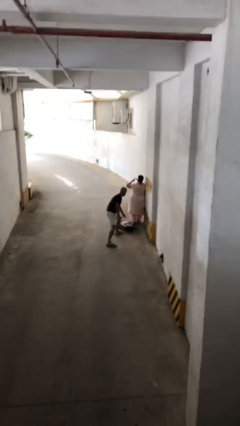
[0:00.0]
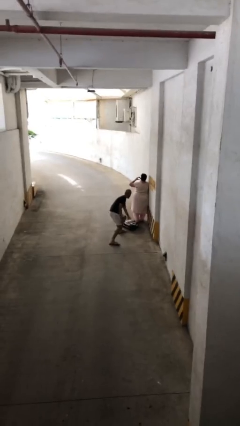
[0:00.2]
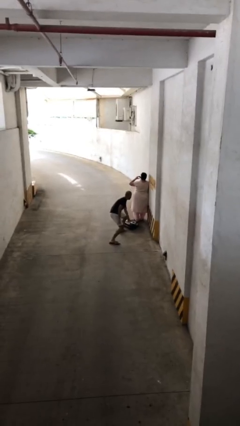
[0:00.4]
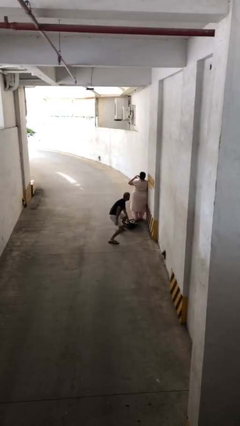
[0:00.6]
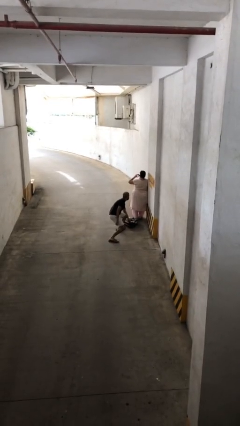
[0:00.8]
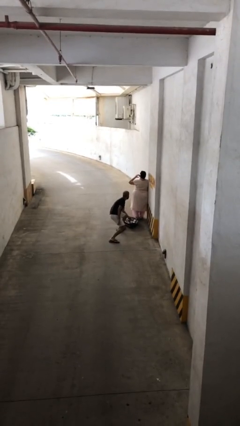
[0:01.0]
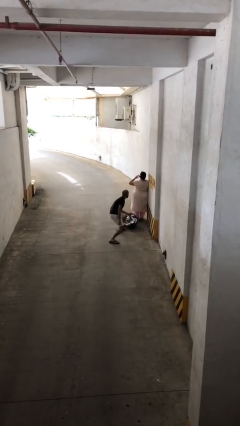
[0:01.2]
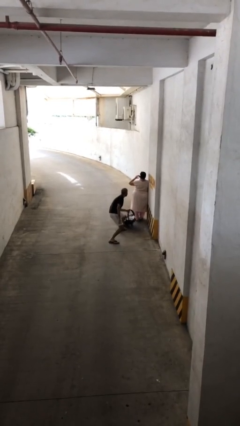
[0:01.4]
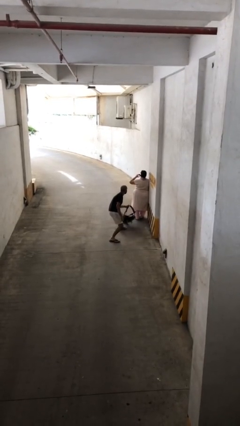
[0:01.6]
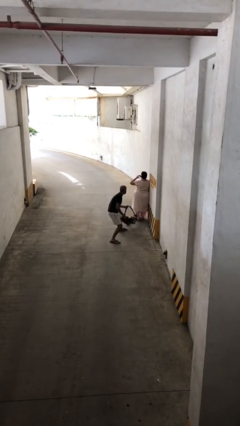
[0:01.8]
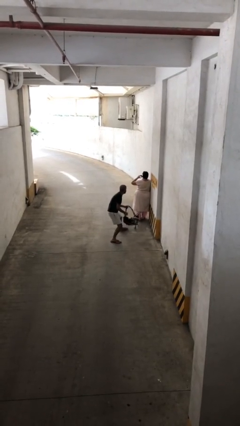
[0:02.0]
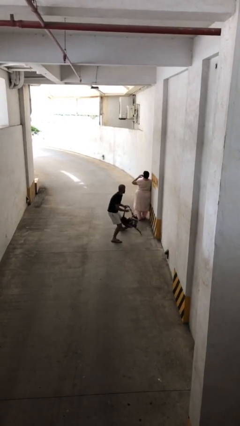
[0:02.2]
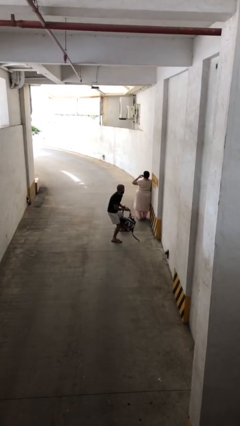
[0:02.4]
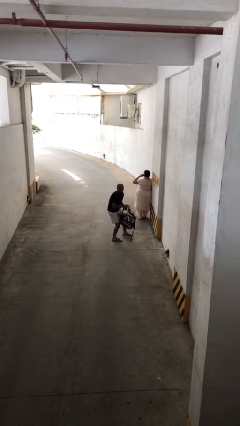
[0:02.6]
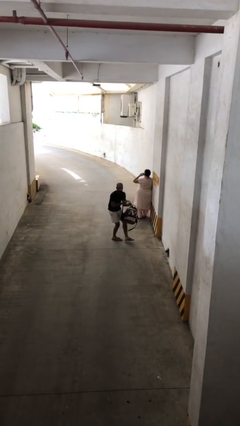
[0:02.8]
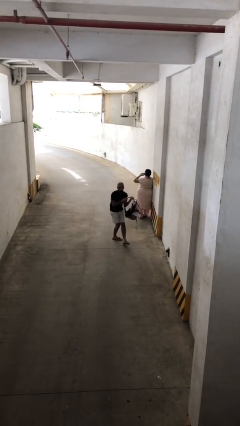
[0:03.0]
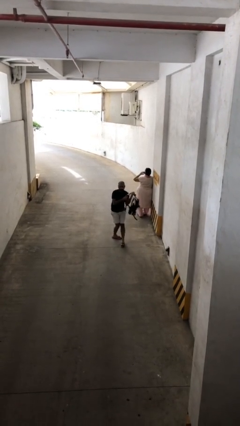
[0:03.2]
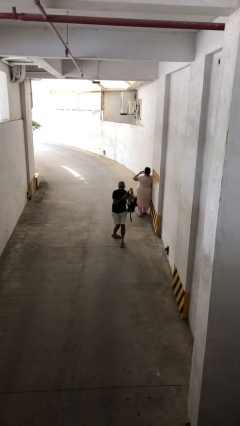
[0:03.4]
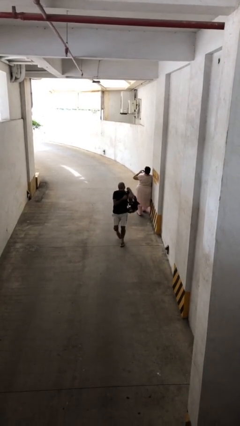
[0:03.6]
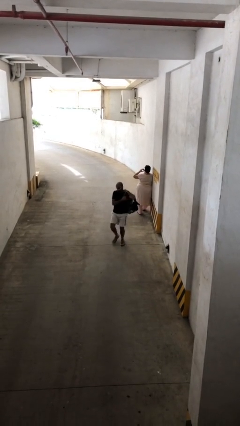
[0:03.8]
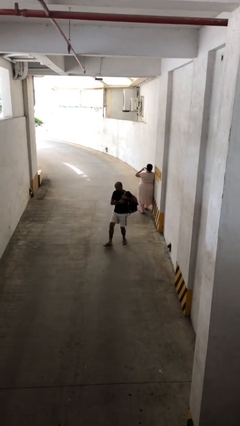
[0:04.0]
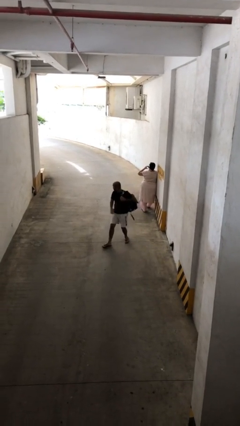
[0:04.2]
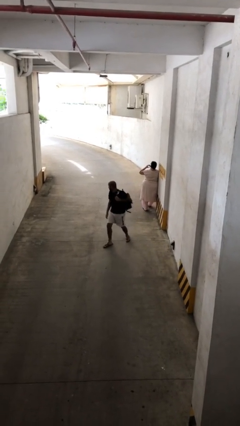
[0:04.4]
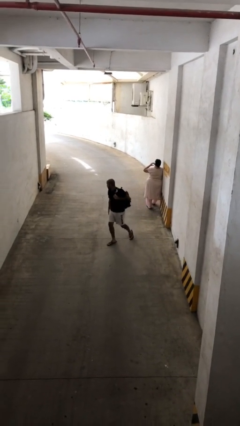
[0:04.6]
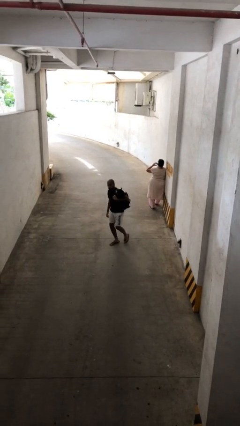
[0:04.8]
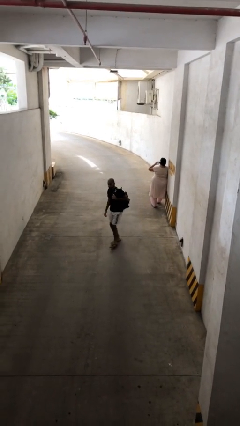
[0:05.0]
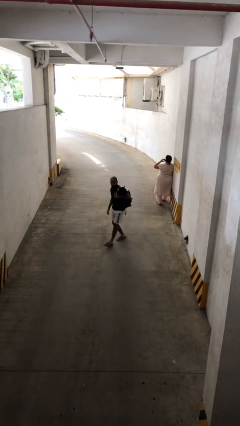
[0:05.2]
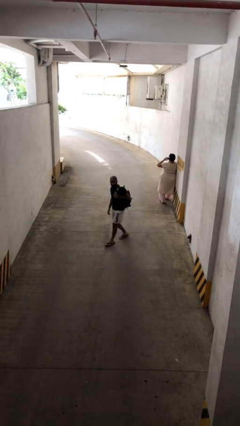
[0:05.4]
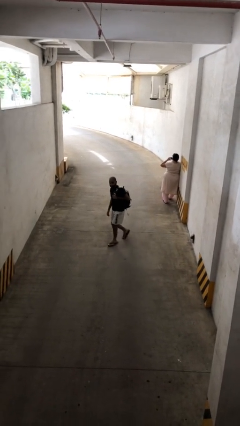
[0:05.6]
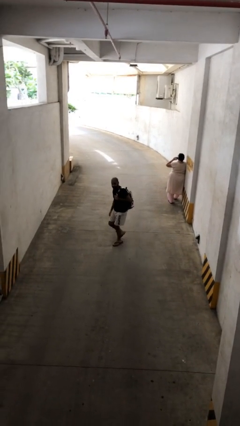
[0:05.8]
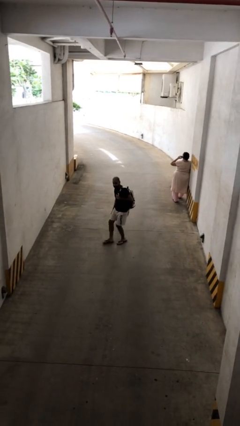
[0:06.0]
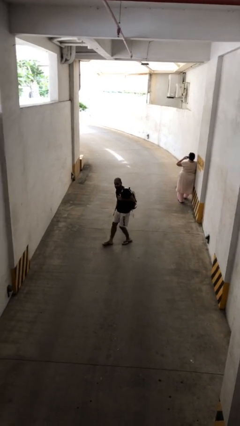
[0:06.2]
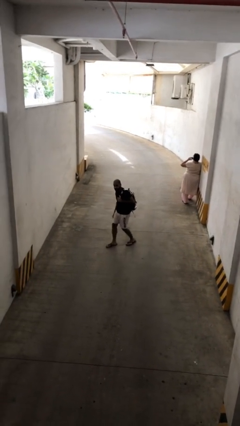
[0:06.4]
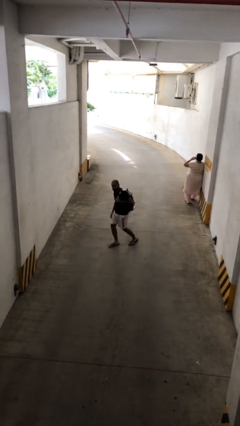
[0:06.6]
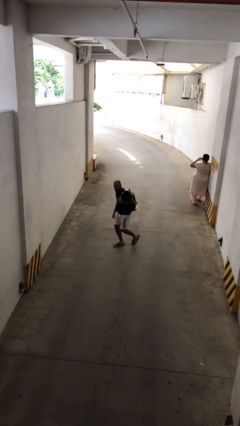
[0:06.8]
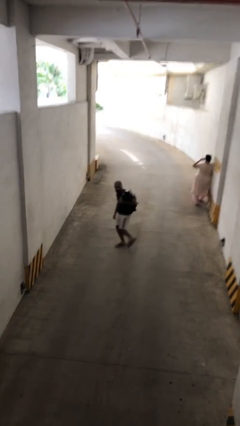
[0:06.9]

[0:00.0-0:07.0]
person steals object from person

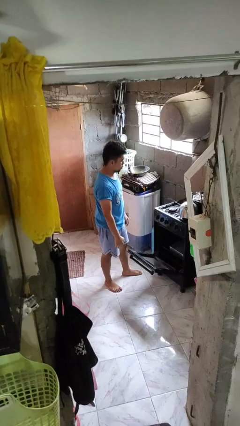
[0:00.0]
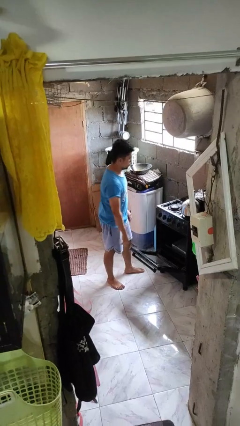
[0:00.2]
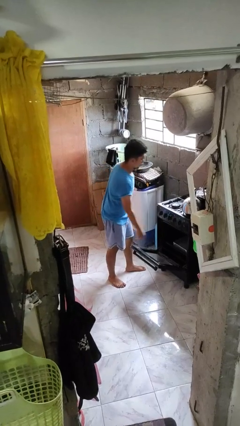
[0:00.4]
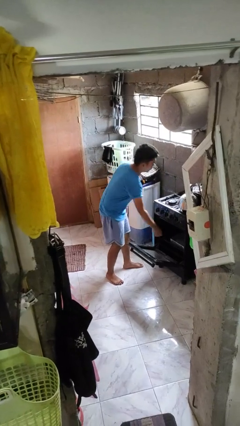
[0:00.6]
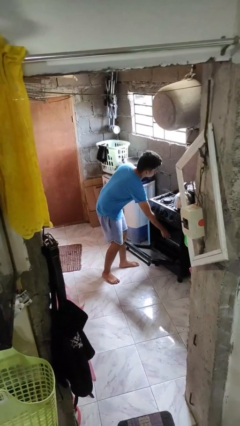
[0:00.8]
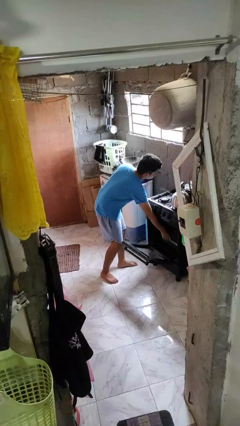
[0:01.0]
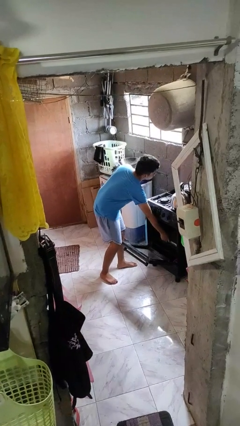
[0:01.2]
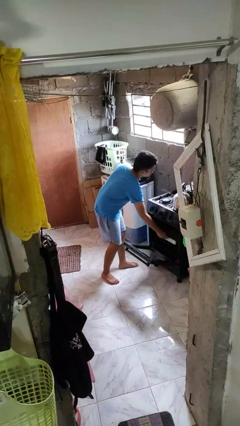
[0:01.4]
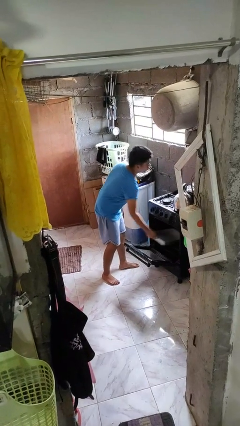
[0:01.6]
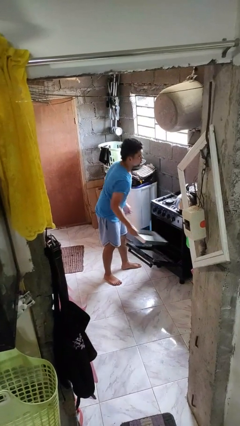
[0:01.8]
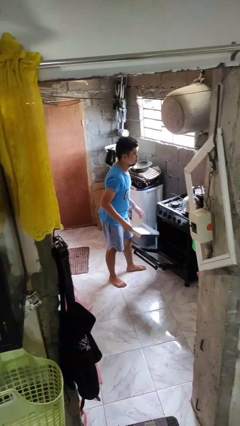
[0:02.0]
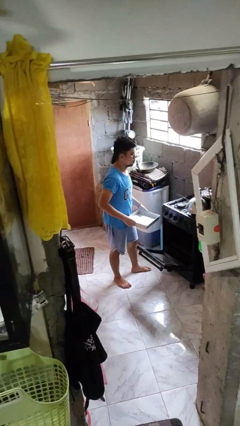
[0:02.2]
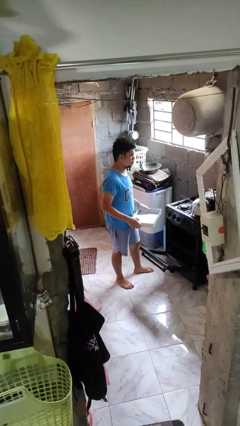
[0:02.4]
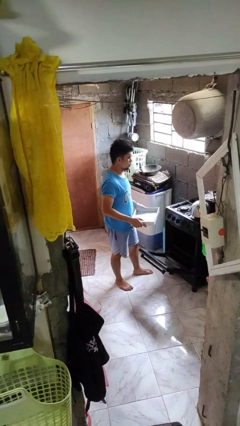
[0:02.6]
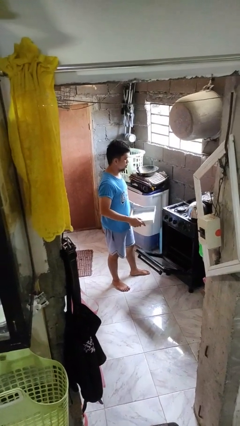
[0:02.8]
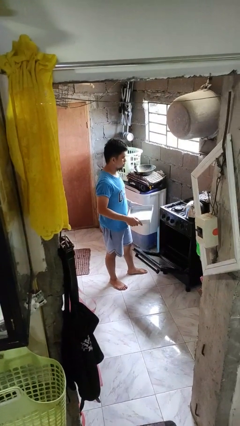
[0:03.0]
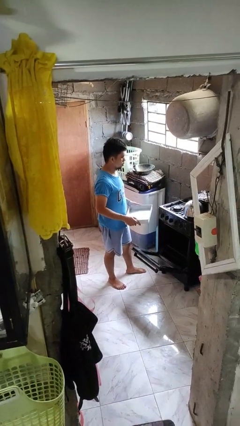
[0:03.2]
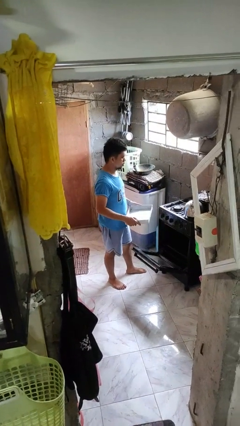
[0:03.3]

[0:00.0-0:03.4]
person takes object from oven

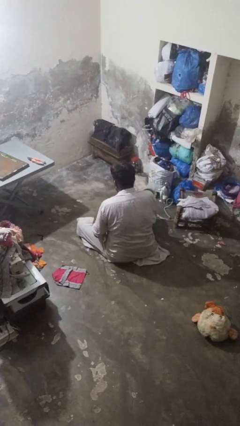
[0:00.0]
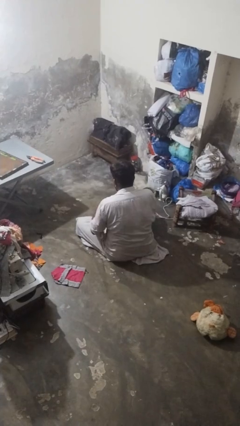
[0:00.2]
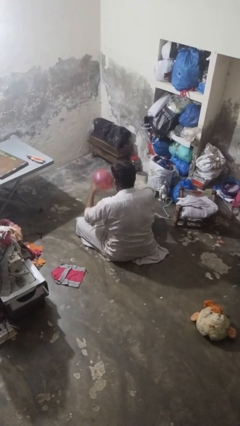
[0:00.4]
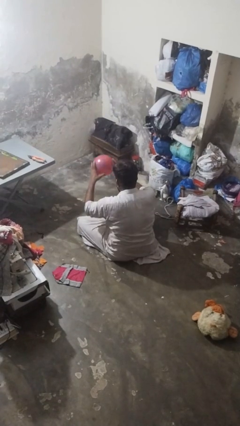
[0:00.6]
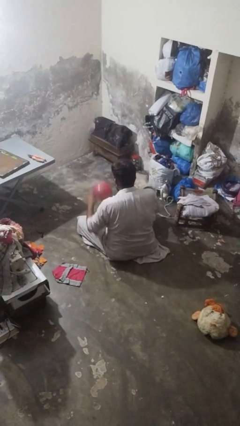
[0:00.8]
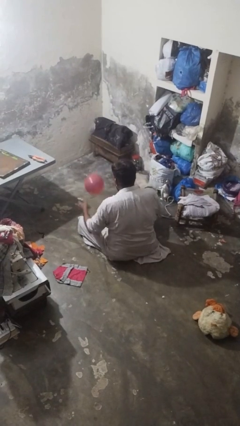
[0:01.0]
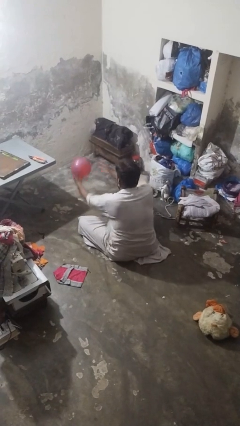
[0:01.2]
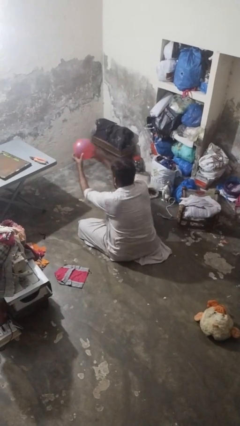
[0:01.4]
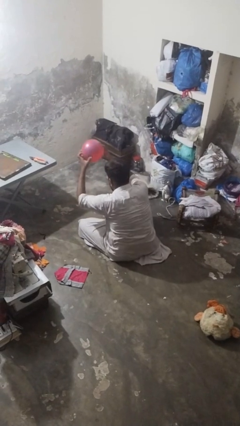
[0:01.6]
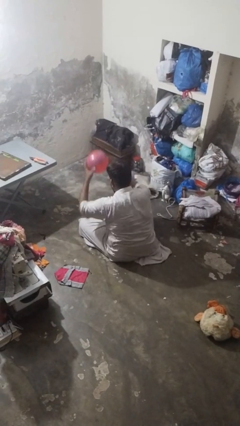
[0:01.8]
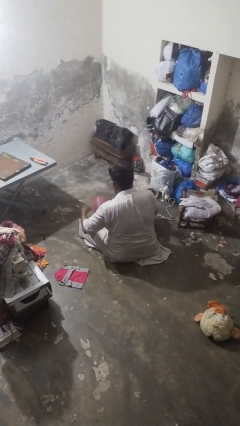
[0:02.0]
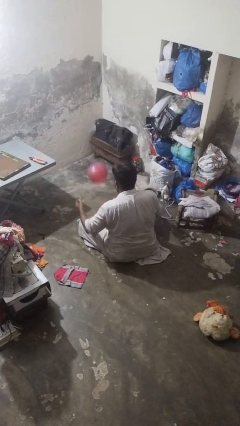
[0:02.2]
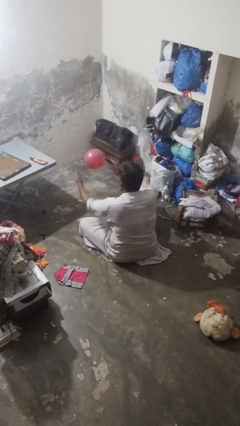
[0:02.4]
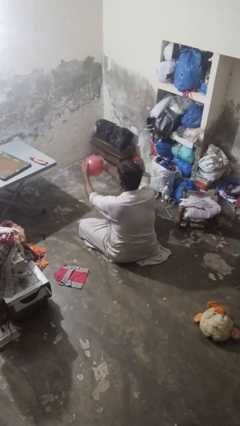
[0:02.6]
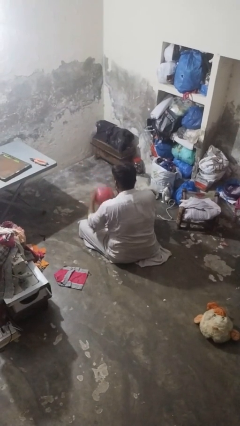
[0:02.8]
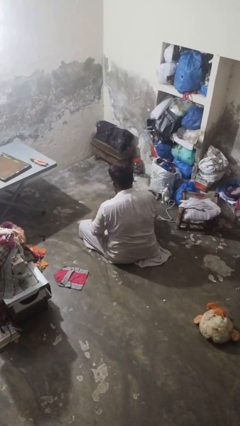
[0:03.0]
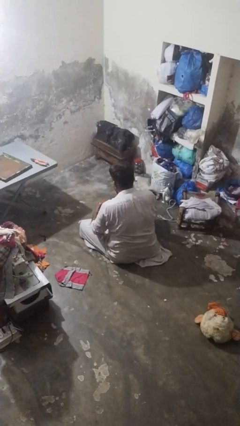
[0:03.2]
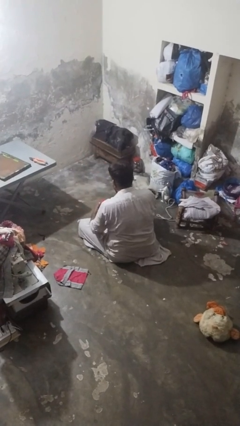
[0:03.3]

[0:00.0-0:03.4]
person bounces ball on floor

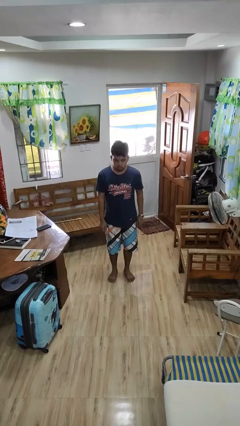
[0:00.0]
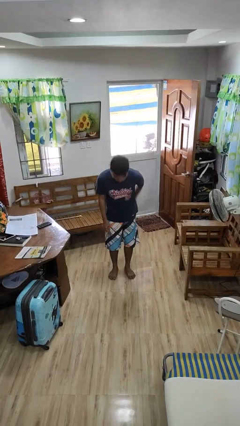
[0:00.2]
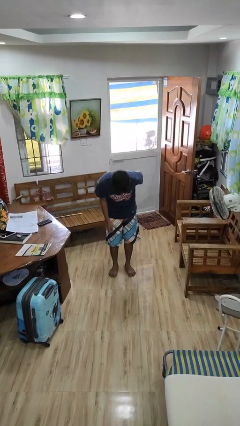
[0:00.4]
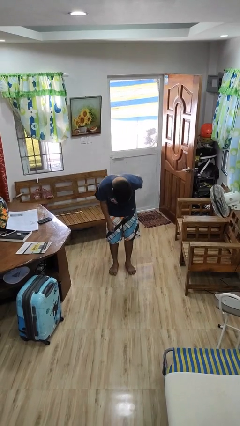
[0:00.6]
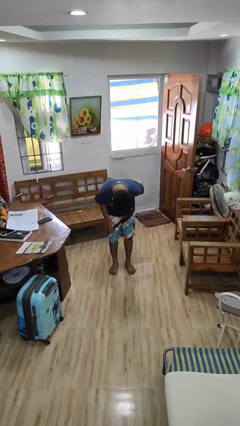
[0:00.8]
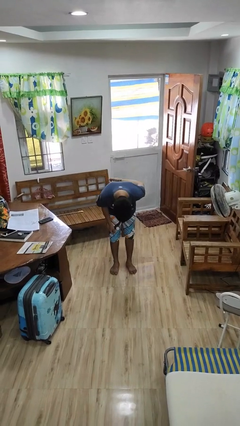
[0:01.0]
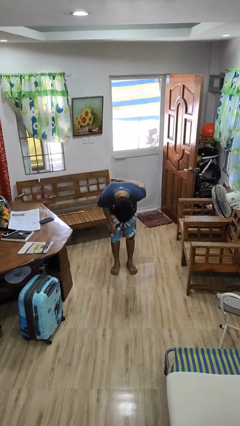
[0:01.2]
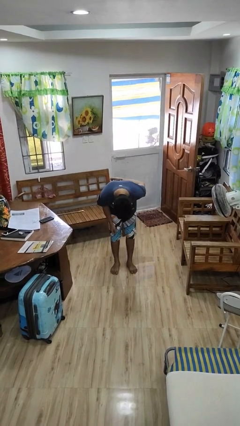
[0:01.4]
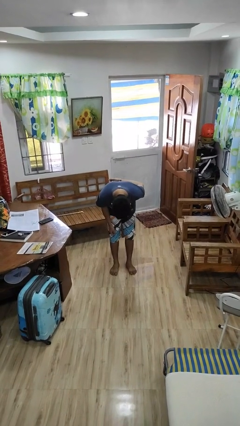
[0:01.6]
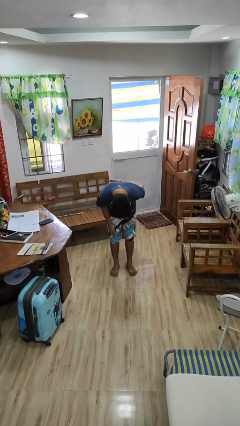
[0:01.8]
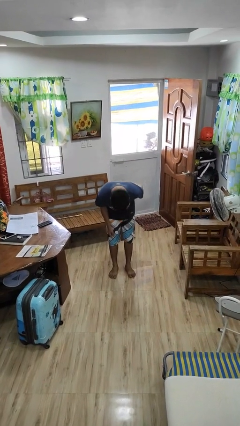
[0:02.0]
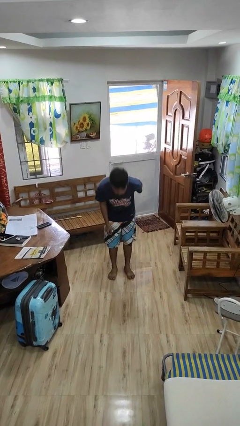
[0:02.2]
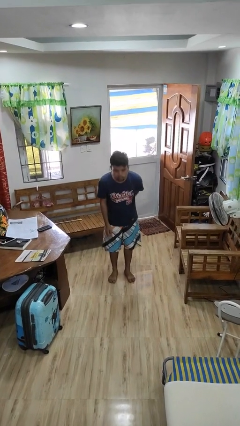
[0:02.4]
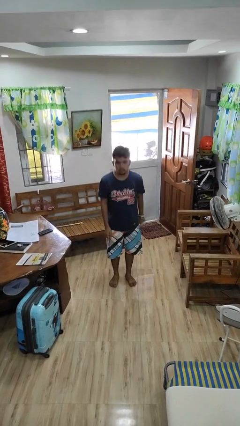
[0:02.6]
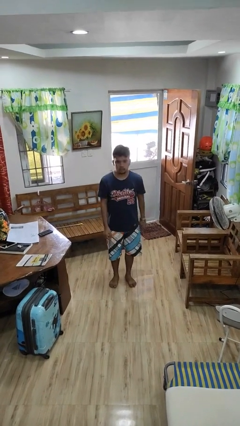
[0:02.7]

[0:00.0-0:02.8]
person bows

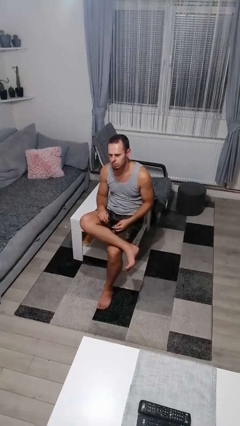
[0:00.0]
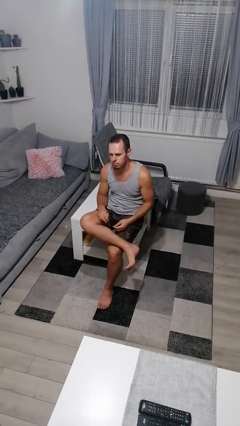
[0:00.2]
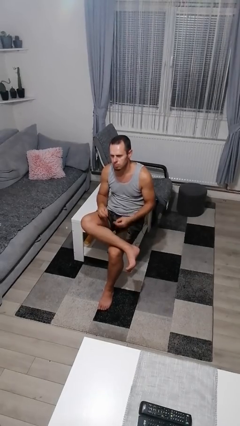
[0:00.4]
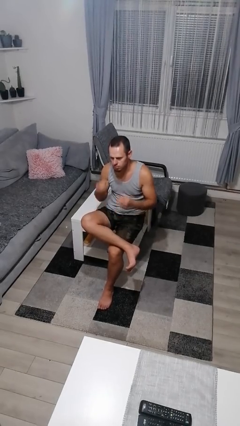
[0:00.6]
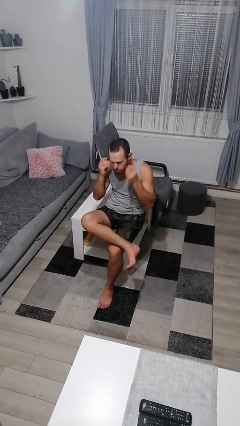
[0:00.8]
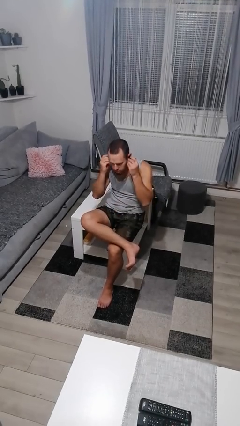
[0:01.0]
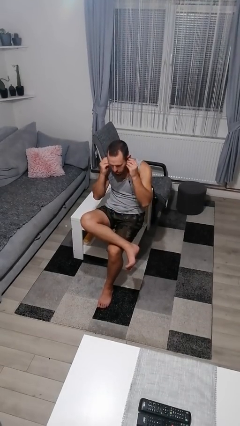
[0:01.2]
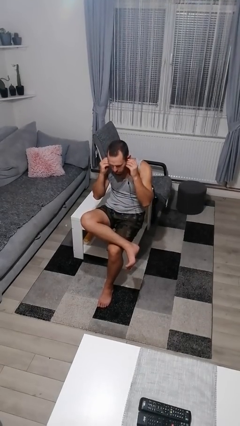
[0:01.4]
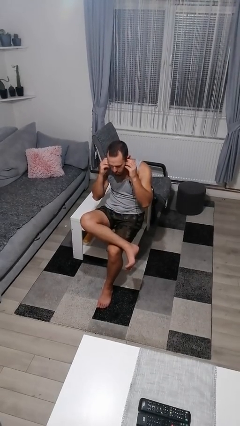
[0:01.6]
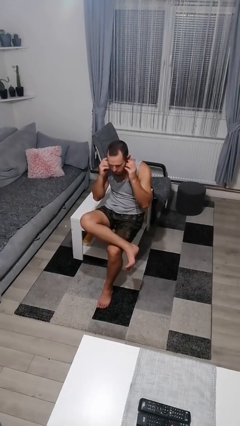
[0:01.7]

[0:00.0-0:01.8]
person puts on headphones
